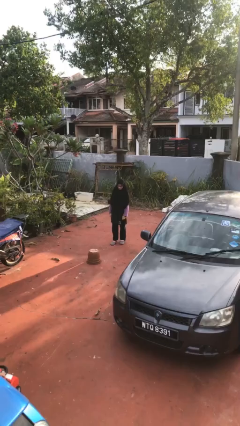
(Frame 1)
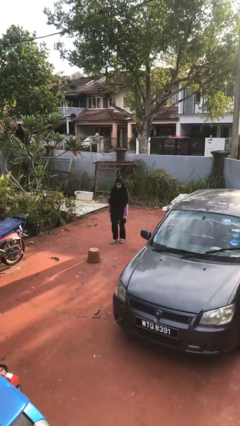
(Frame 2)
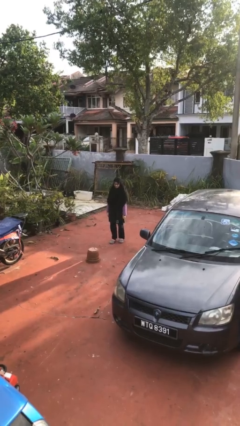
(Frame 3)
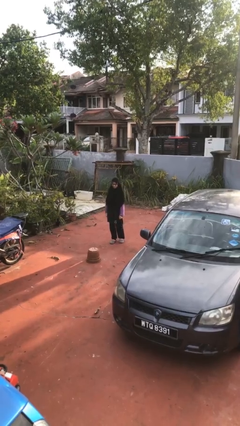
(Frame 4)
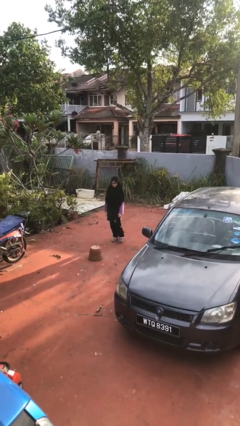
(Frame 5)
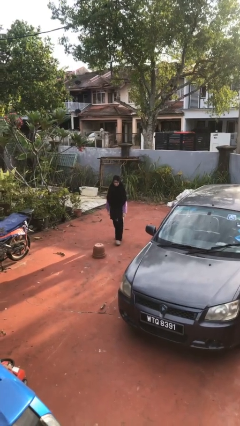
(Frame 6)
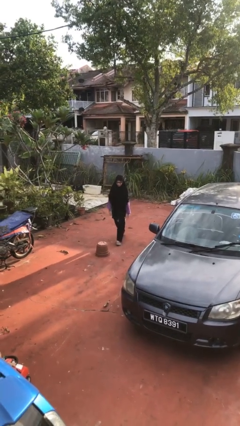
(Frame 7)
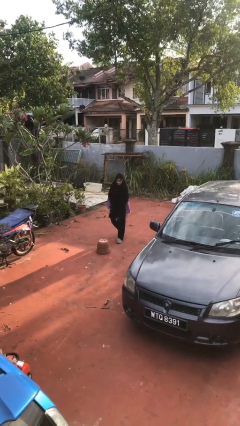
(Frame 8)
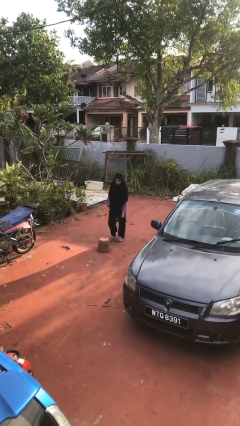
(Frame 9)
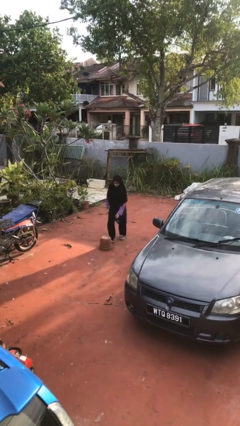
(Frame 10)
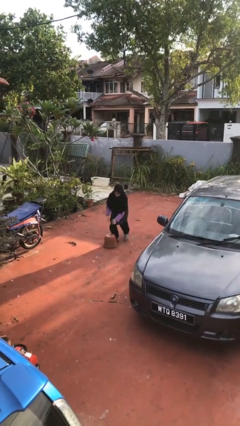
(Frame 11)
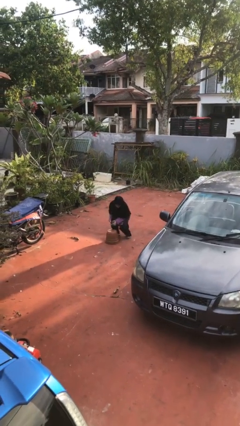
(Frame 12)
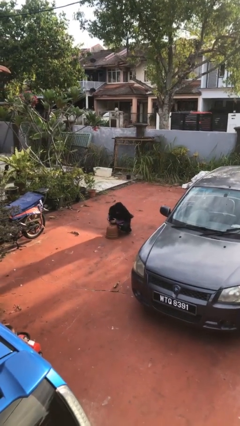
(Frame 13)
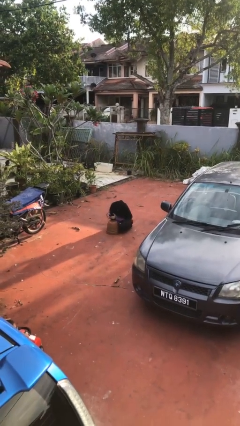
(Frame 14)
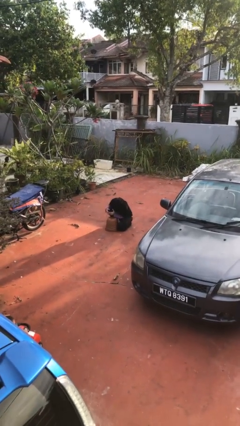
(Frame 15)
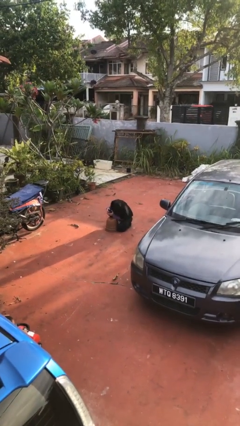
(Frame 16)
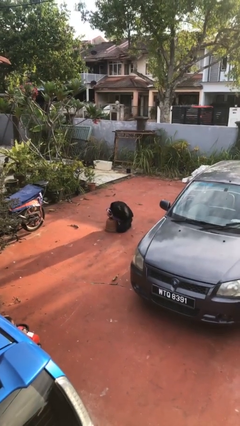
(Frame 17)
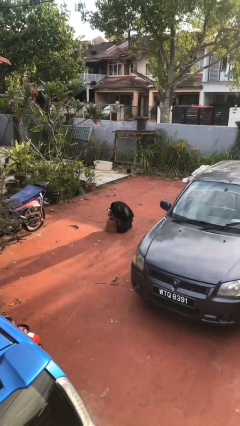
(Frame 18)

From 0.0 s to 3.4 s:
person trips on object on floor

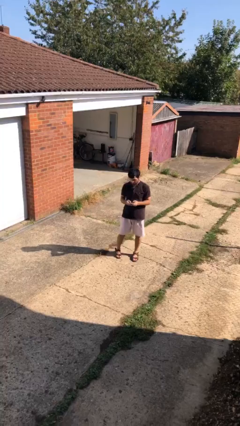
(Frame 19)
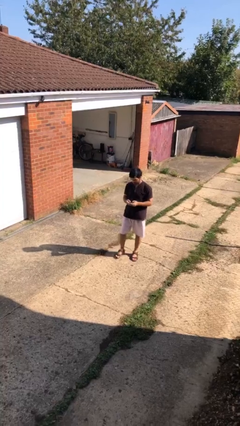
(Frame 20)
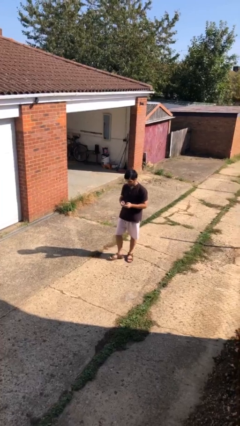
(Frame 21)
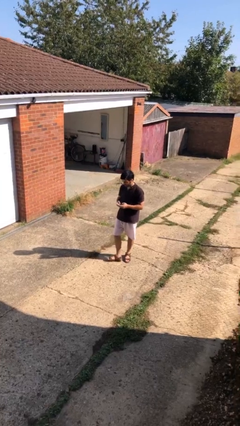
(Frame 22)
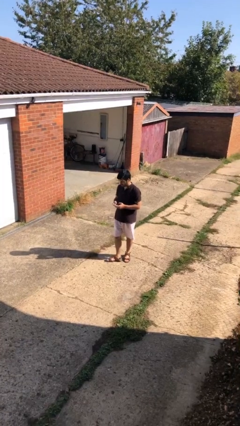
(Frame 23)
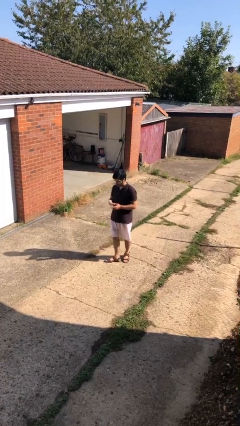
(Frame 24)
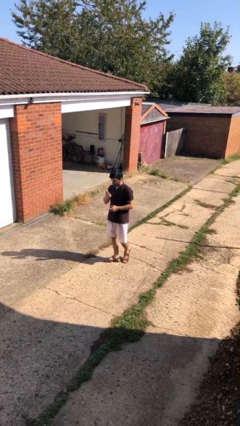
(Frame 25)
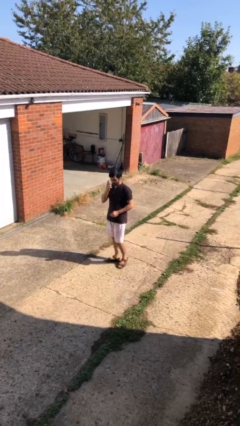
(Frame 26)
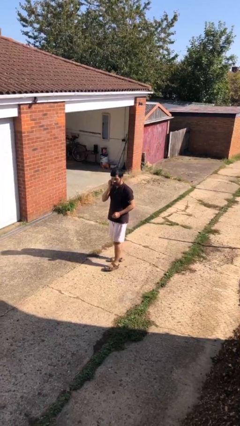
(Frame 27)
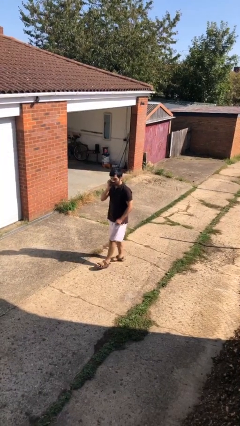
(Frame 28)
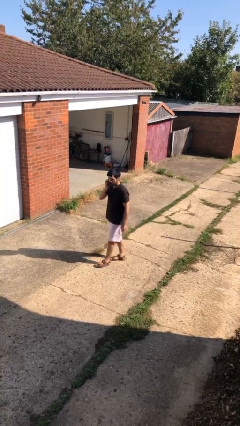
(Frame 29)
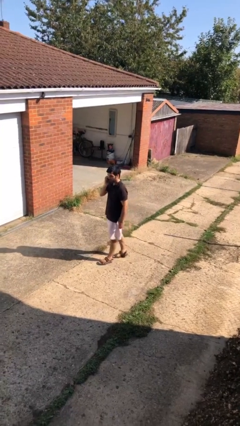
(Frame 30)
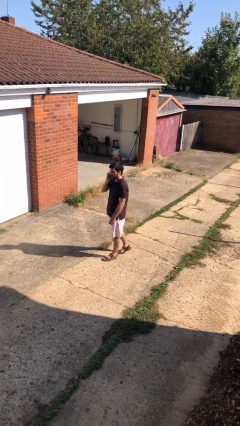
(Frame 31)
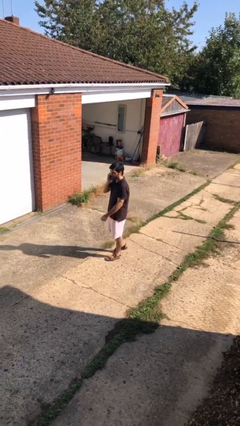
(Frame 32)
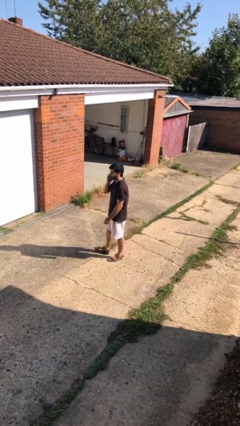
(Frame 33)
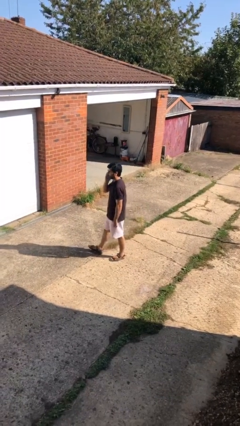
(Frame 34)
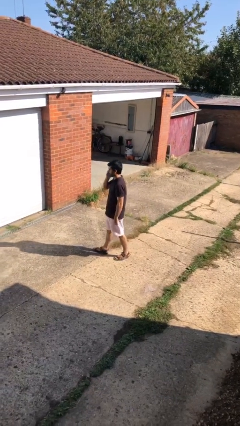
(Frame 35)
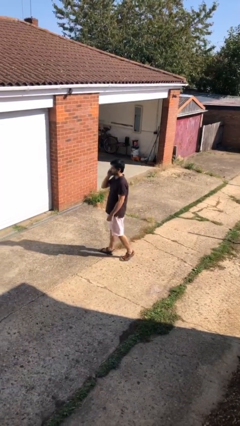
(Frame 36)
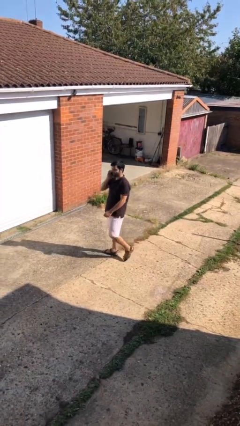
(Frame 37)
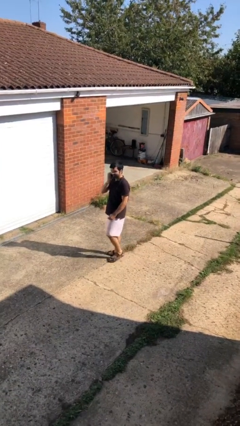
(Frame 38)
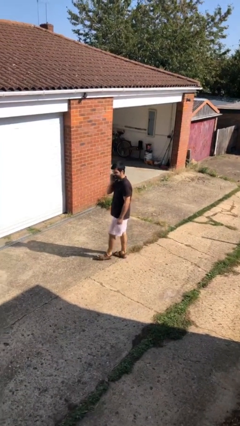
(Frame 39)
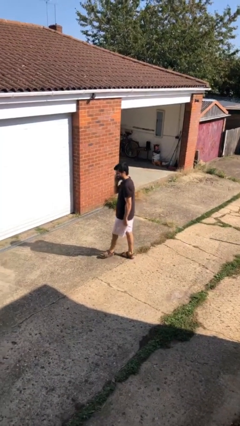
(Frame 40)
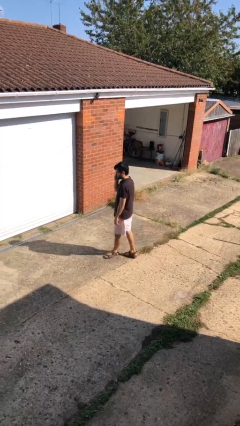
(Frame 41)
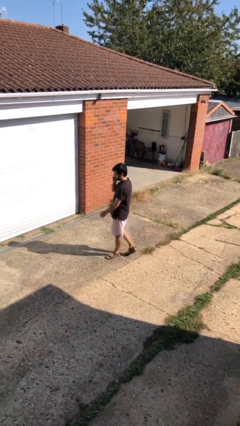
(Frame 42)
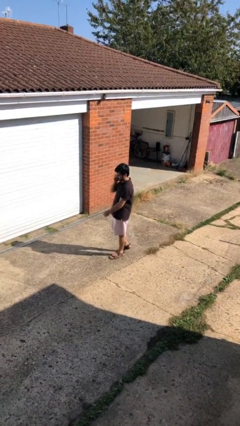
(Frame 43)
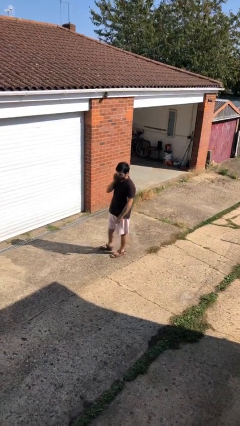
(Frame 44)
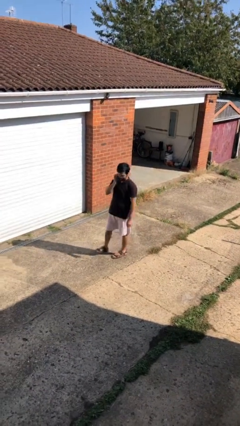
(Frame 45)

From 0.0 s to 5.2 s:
person talks on phone

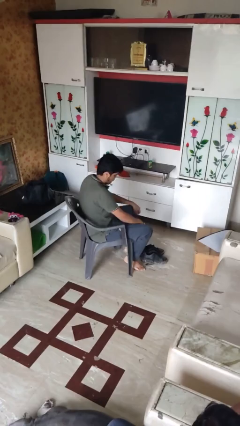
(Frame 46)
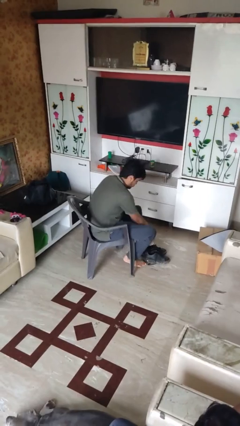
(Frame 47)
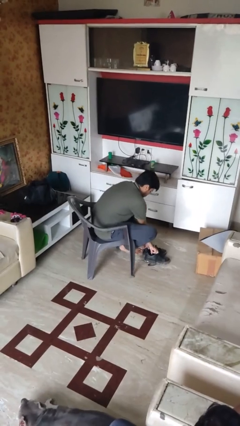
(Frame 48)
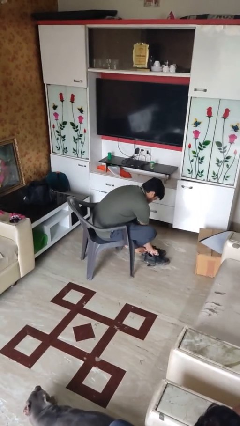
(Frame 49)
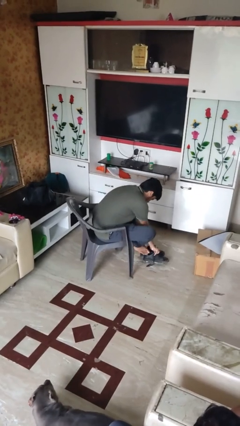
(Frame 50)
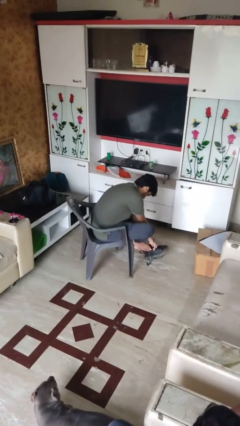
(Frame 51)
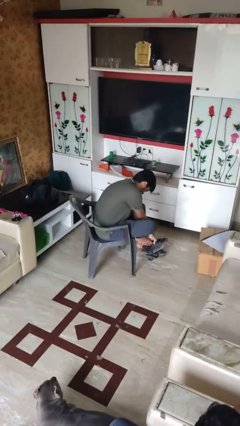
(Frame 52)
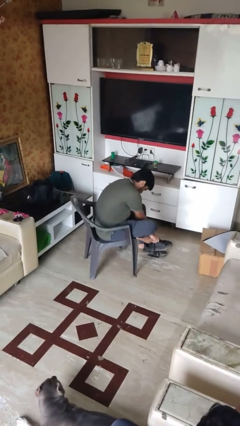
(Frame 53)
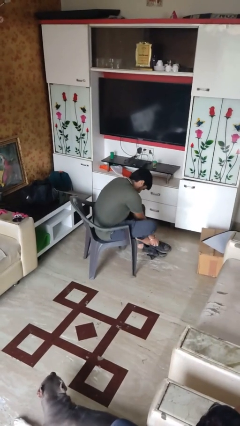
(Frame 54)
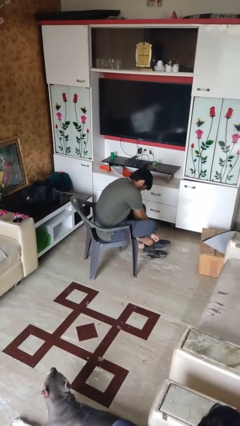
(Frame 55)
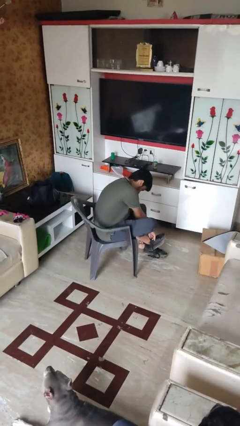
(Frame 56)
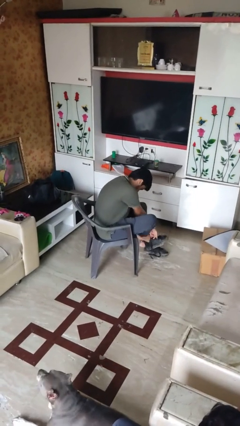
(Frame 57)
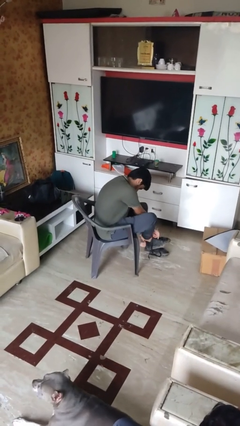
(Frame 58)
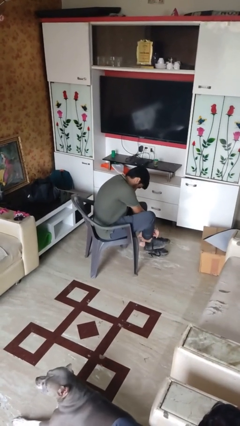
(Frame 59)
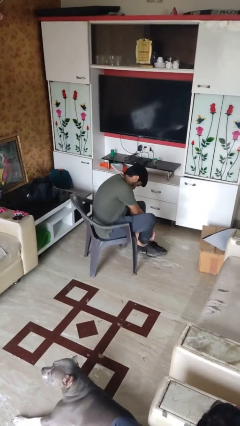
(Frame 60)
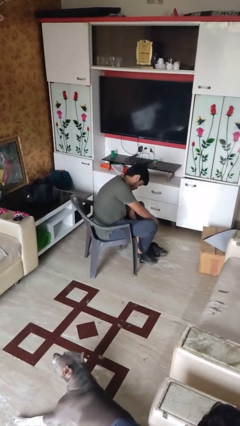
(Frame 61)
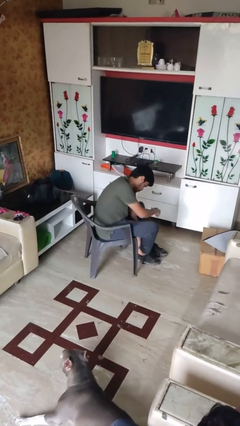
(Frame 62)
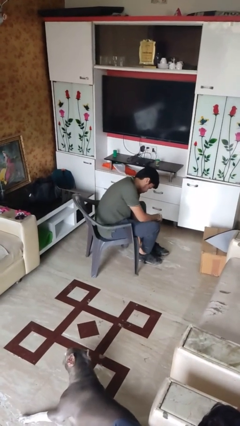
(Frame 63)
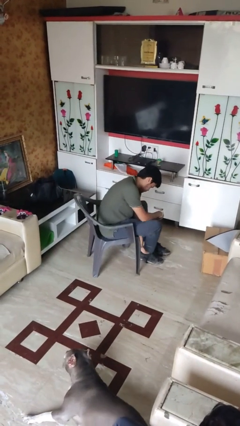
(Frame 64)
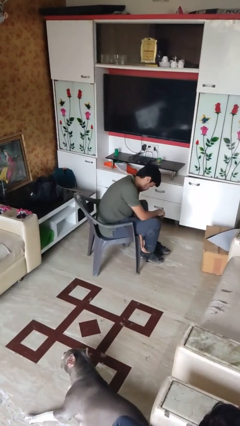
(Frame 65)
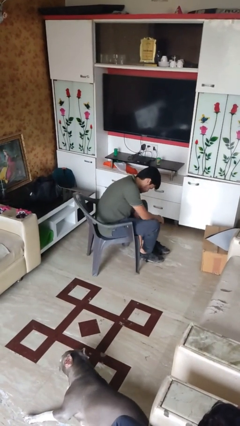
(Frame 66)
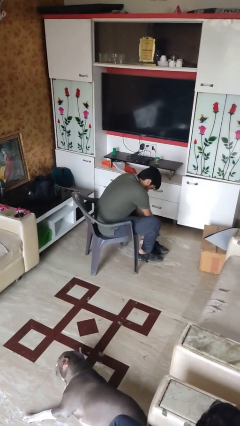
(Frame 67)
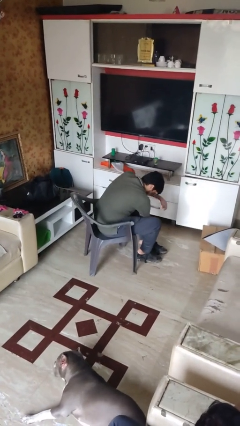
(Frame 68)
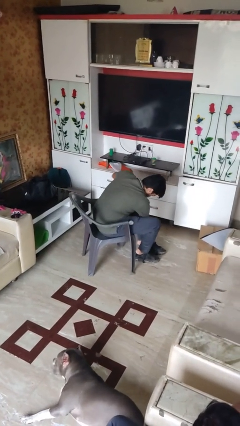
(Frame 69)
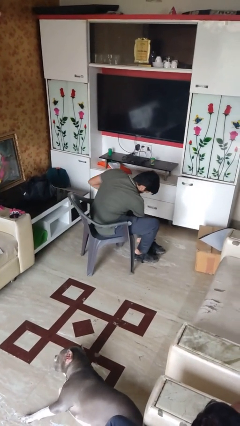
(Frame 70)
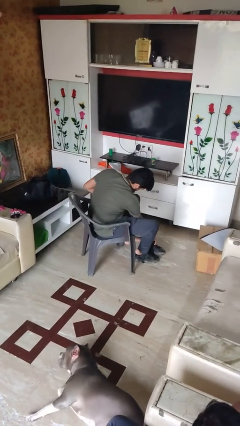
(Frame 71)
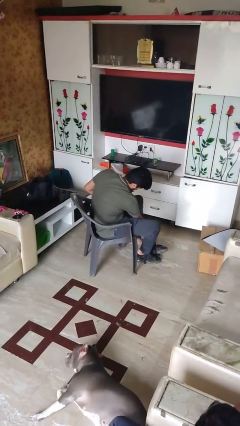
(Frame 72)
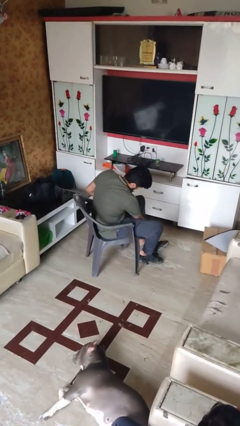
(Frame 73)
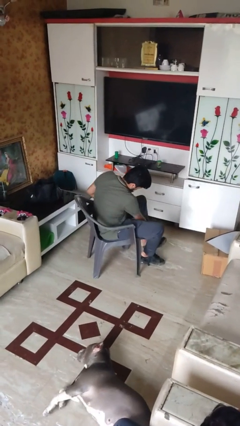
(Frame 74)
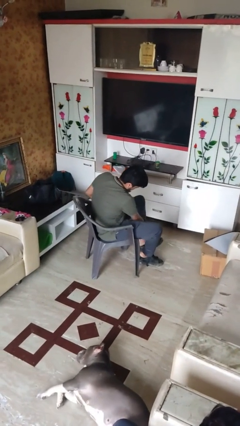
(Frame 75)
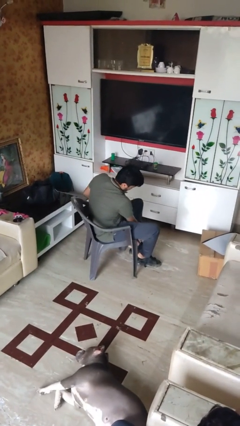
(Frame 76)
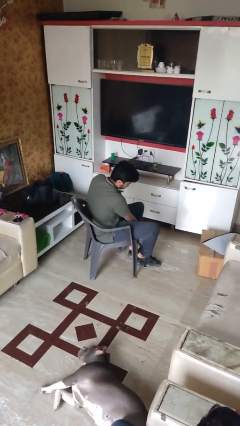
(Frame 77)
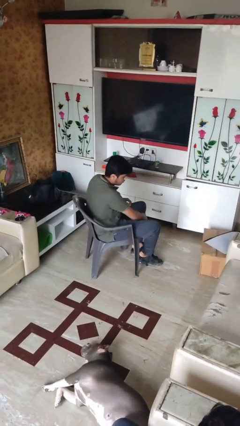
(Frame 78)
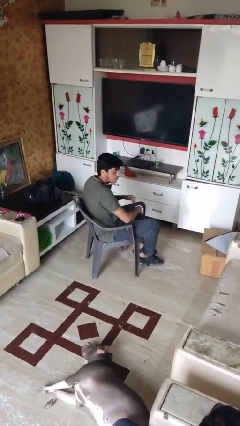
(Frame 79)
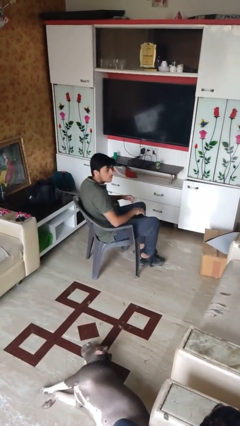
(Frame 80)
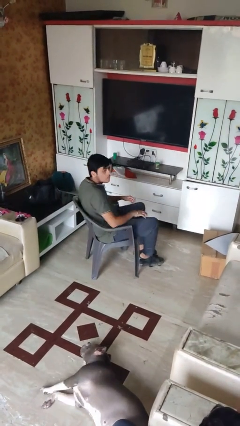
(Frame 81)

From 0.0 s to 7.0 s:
person puts on shoes

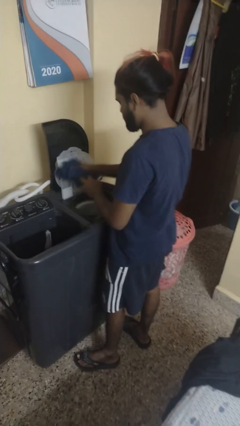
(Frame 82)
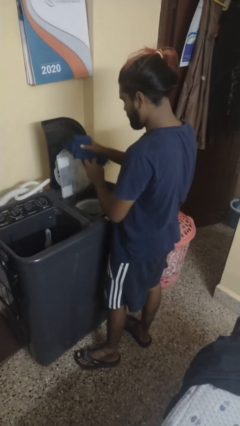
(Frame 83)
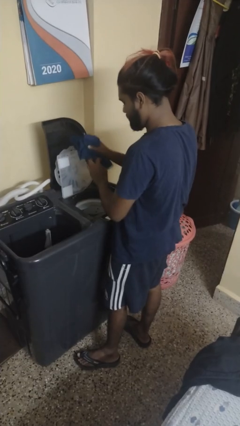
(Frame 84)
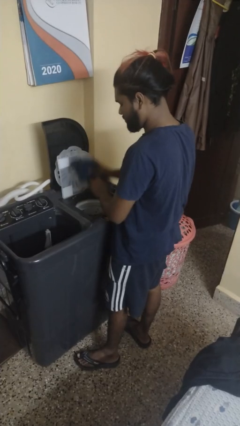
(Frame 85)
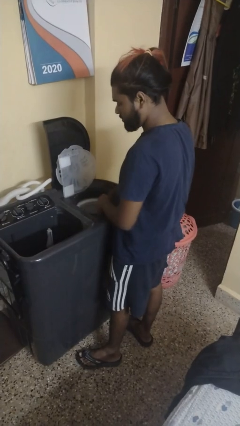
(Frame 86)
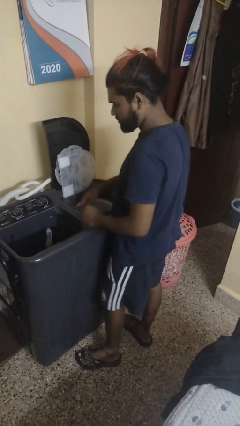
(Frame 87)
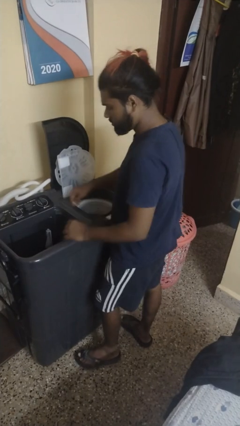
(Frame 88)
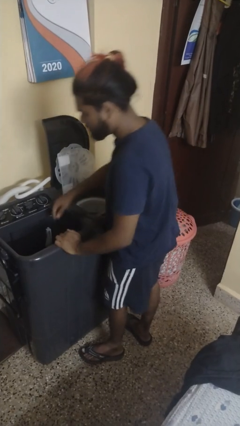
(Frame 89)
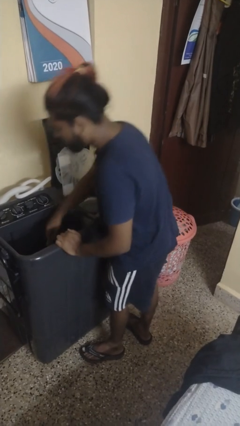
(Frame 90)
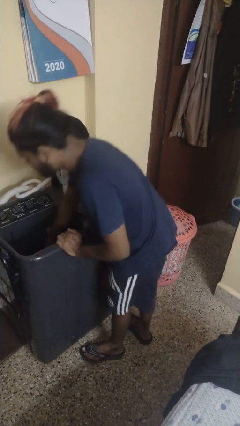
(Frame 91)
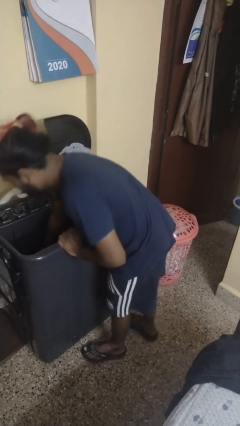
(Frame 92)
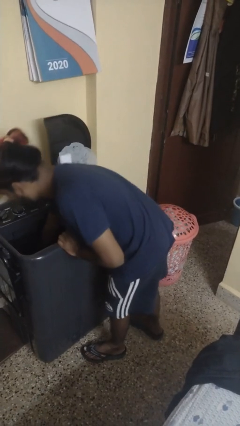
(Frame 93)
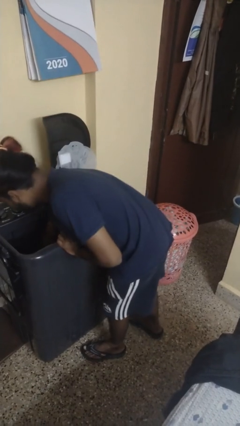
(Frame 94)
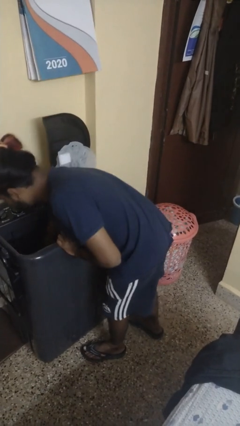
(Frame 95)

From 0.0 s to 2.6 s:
person loads dryer
